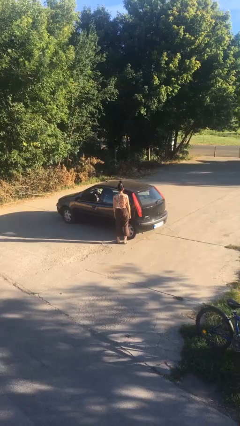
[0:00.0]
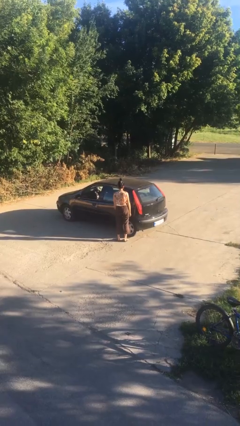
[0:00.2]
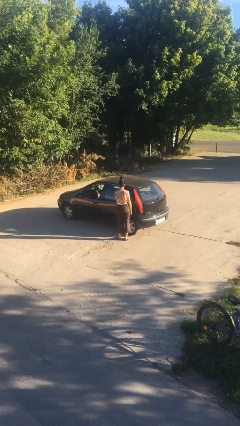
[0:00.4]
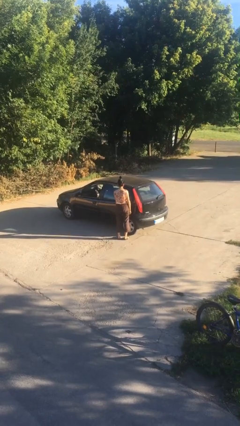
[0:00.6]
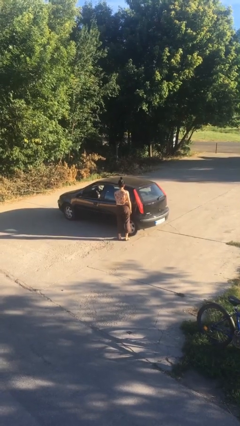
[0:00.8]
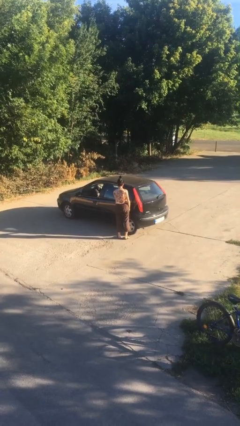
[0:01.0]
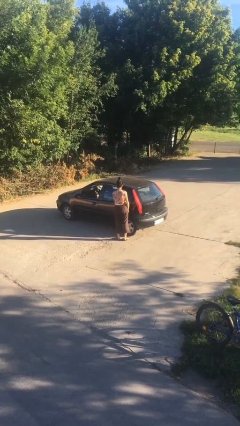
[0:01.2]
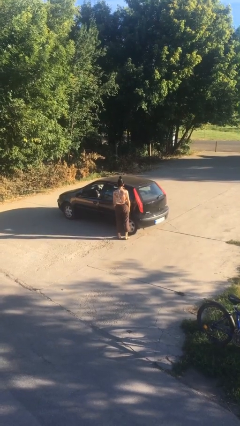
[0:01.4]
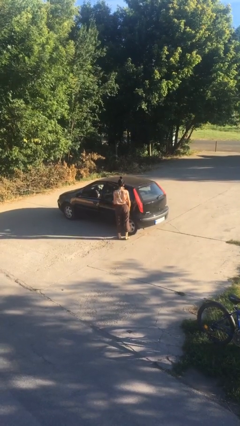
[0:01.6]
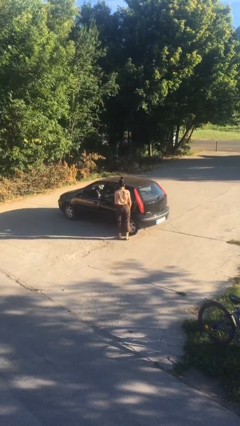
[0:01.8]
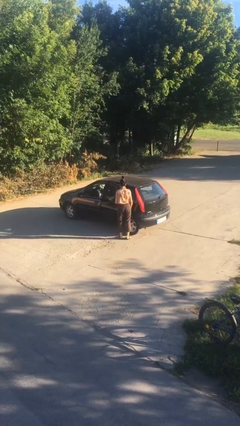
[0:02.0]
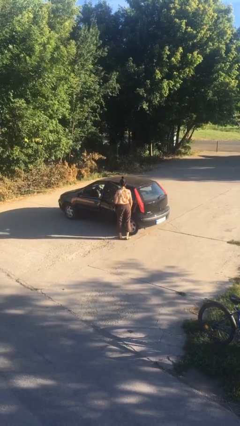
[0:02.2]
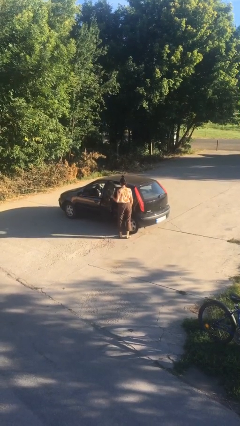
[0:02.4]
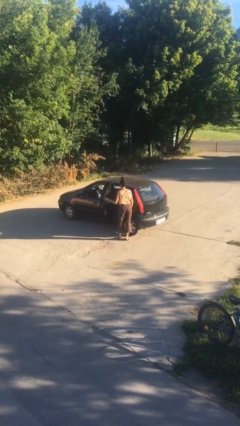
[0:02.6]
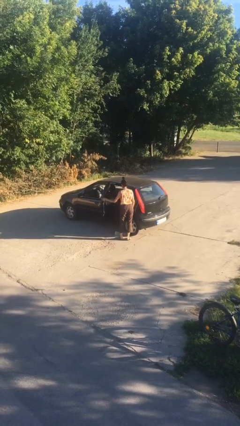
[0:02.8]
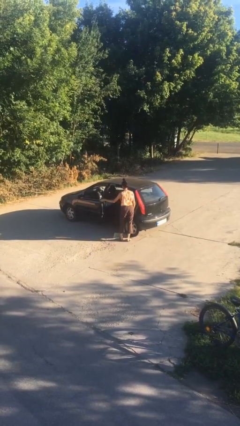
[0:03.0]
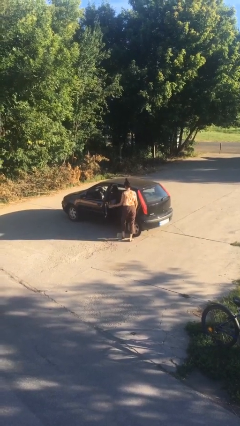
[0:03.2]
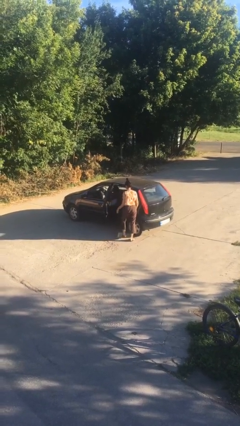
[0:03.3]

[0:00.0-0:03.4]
person opens car door

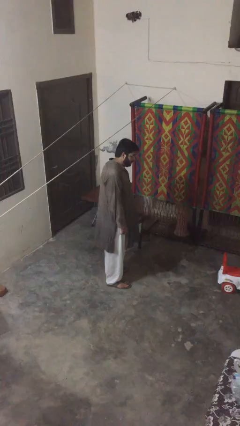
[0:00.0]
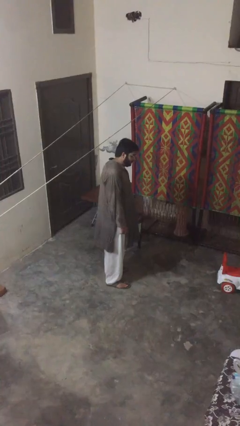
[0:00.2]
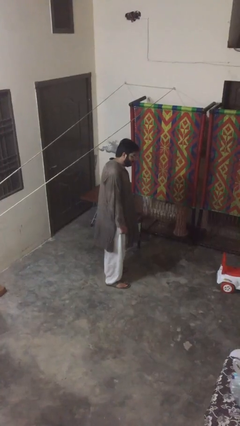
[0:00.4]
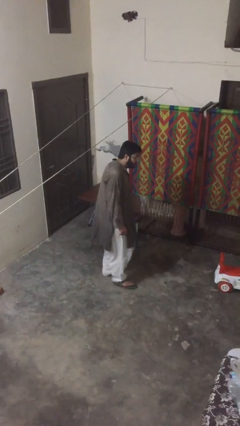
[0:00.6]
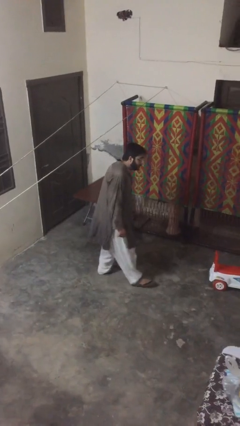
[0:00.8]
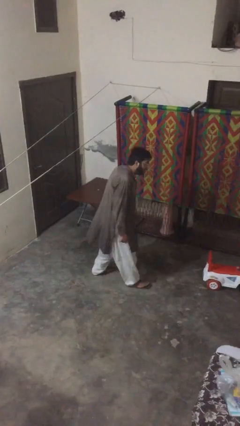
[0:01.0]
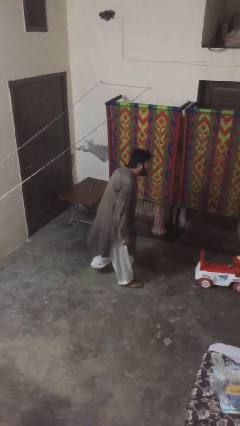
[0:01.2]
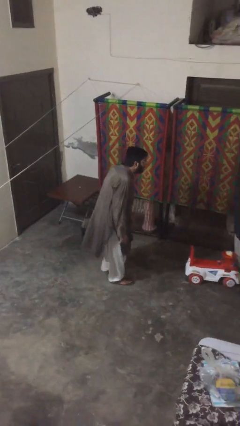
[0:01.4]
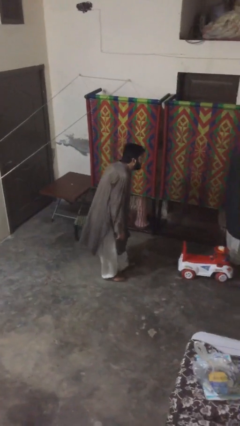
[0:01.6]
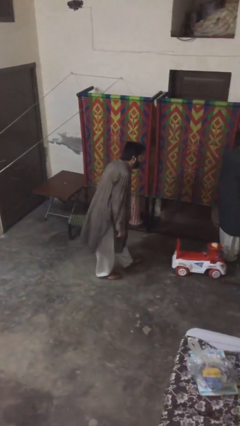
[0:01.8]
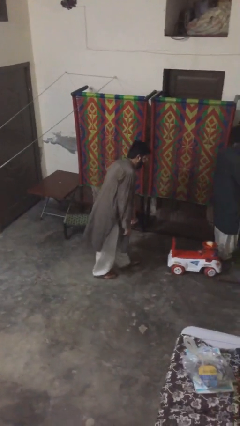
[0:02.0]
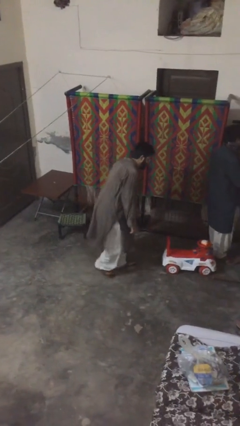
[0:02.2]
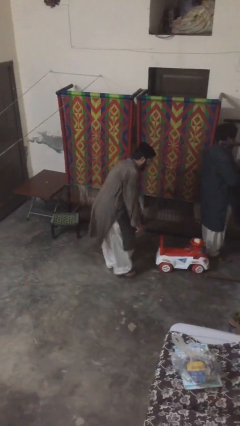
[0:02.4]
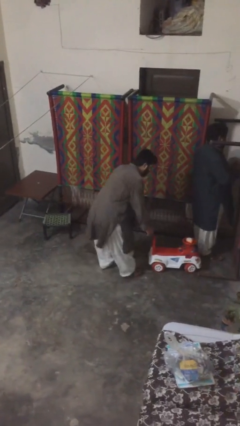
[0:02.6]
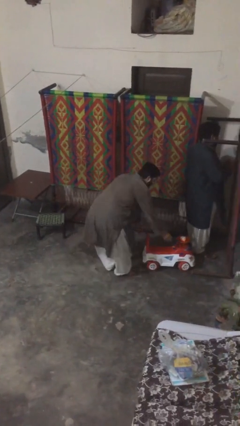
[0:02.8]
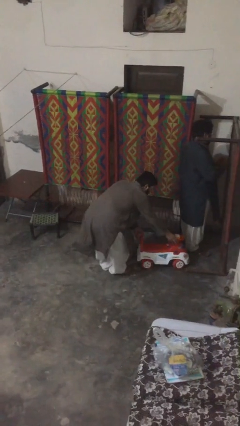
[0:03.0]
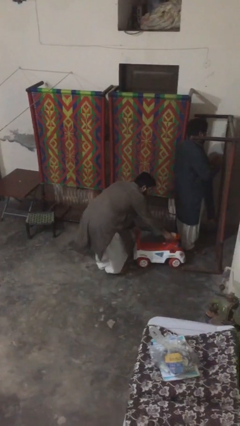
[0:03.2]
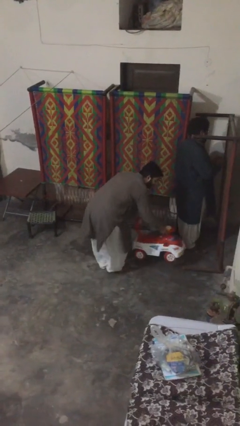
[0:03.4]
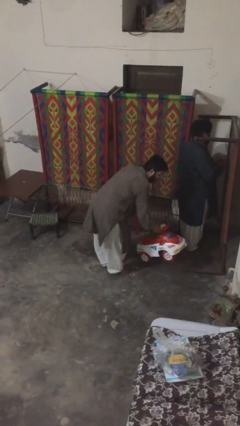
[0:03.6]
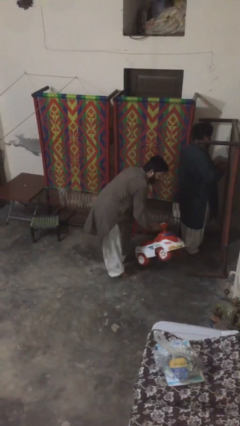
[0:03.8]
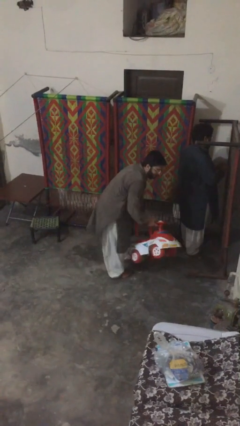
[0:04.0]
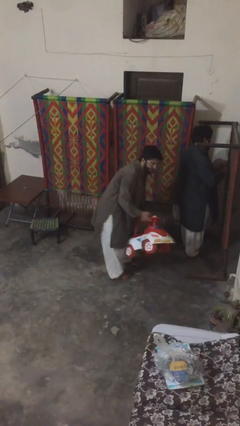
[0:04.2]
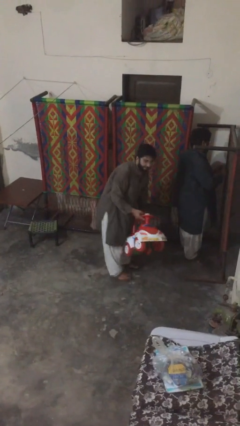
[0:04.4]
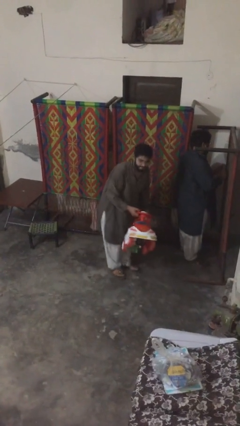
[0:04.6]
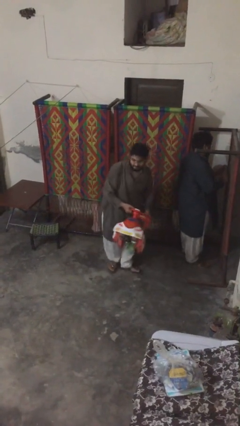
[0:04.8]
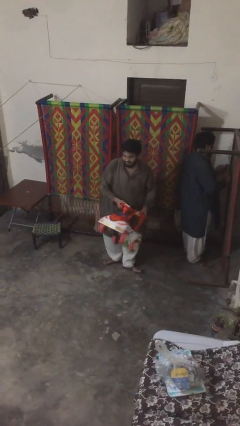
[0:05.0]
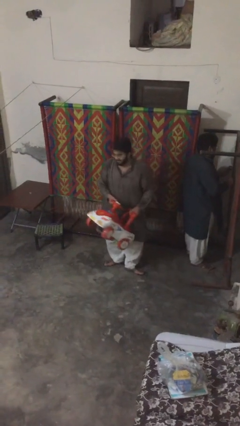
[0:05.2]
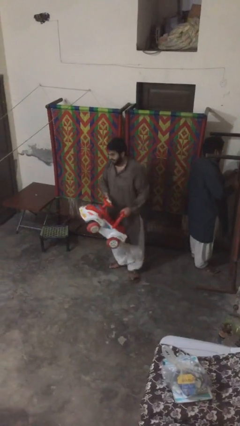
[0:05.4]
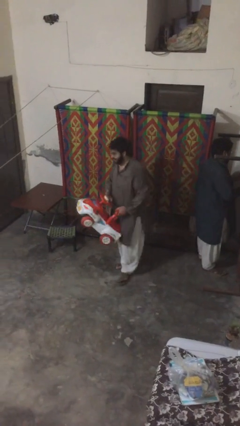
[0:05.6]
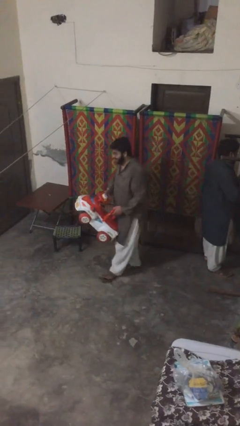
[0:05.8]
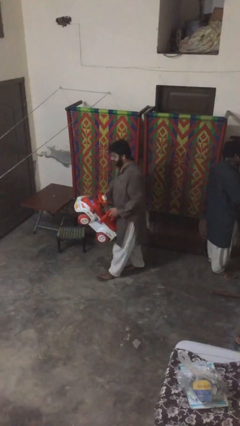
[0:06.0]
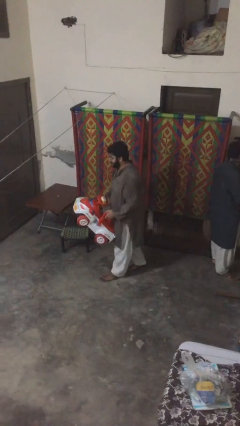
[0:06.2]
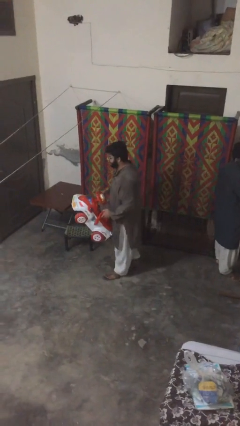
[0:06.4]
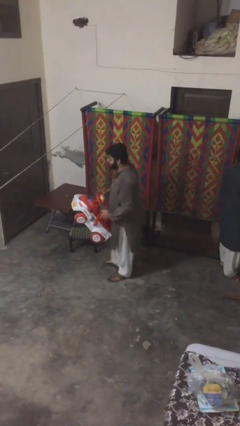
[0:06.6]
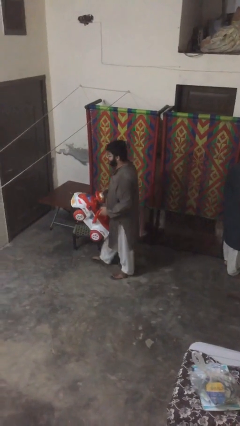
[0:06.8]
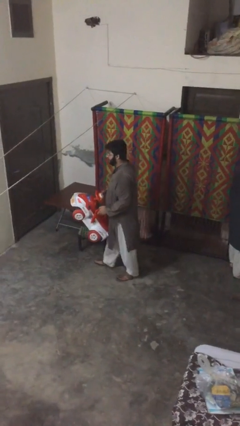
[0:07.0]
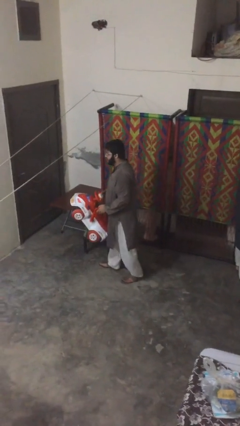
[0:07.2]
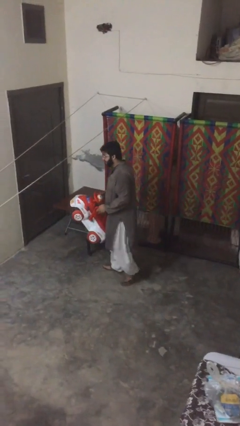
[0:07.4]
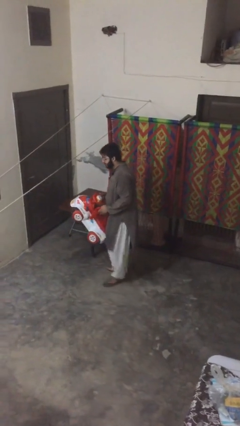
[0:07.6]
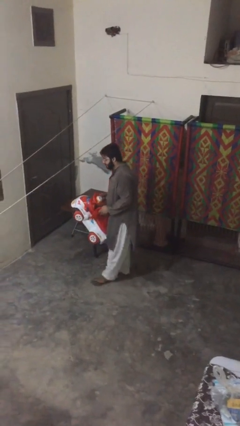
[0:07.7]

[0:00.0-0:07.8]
person steals object from person

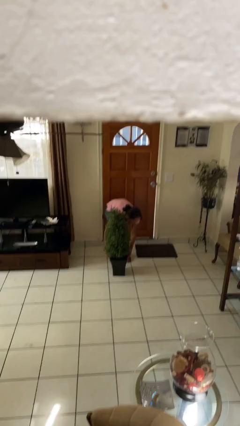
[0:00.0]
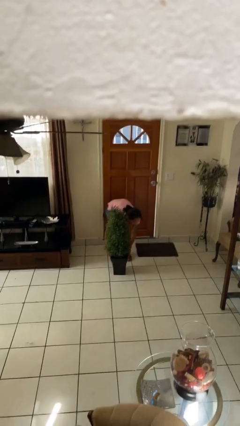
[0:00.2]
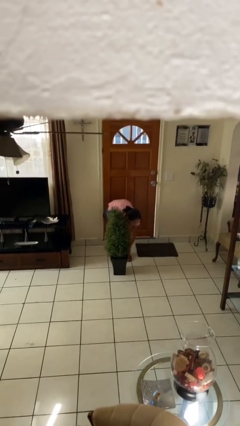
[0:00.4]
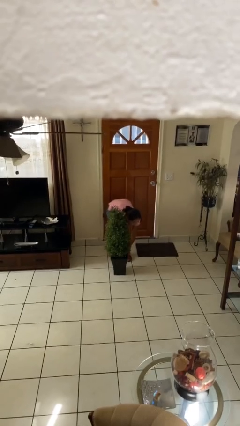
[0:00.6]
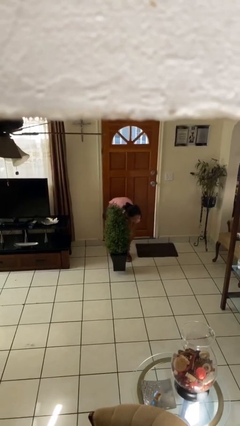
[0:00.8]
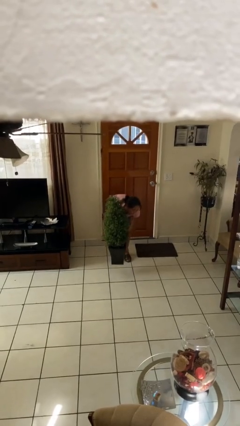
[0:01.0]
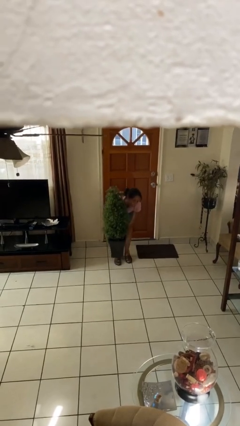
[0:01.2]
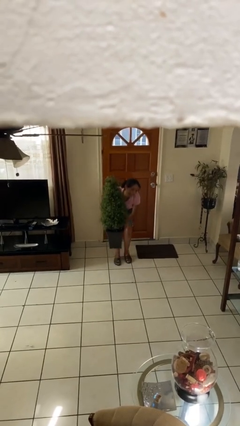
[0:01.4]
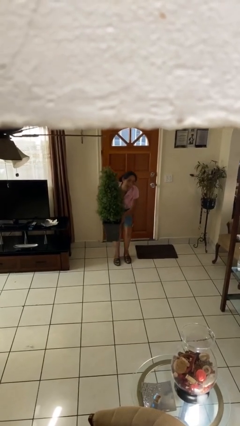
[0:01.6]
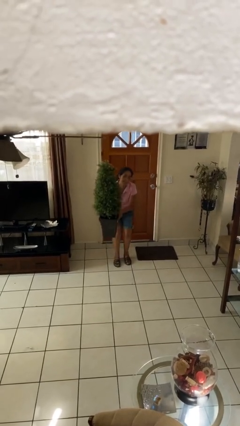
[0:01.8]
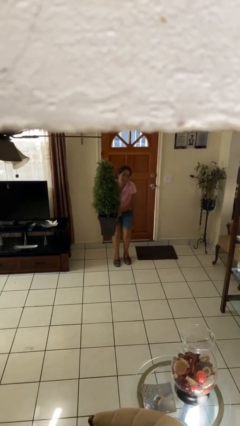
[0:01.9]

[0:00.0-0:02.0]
person picks up object from floor

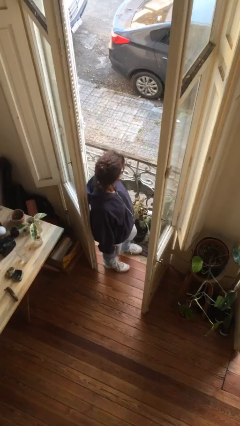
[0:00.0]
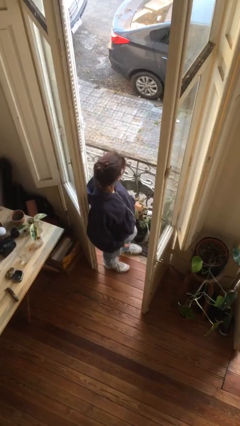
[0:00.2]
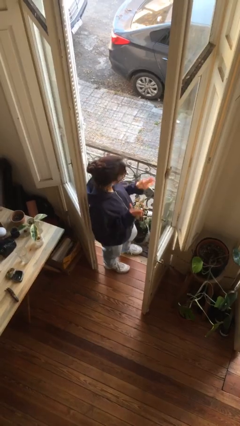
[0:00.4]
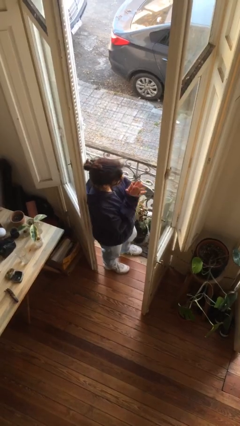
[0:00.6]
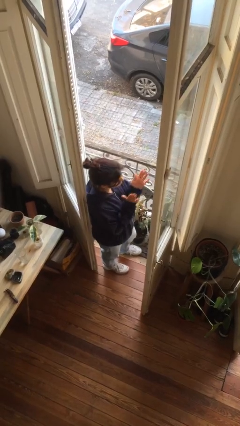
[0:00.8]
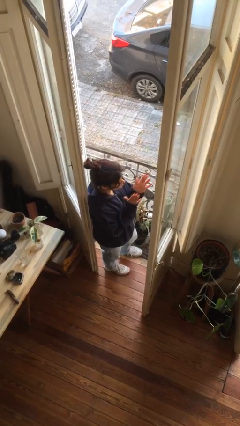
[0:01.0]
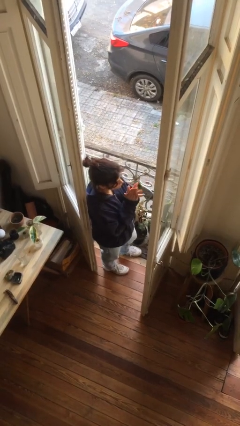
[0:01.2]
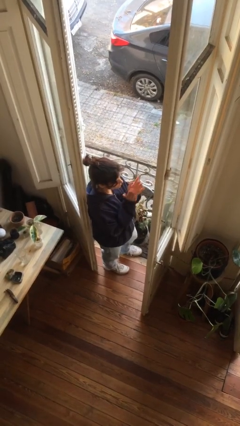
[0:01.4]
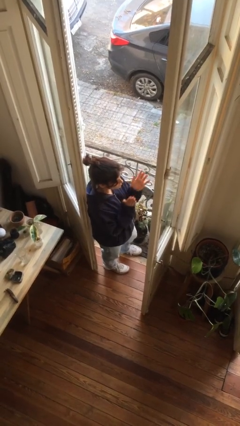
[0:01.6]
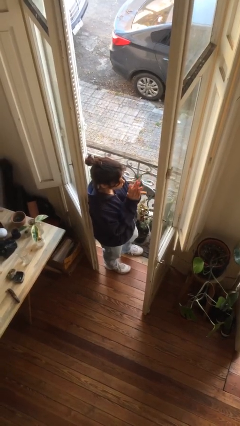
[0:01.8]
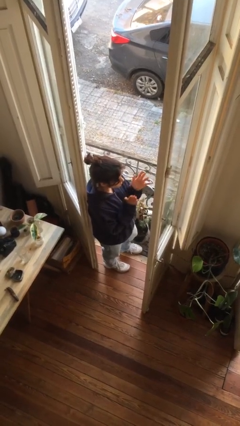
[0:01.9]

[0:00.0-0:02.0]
person claps hands

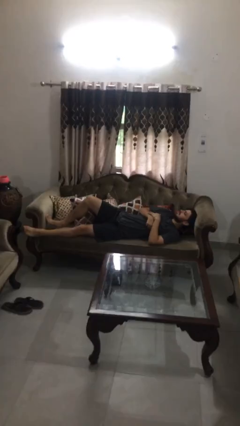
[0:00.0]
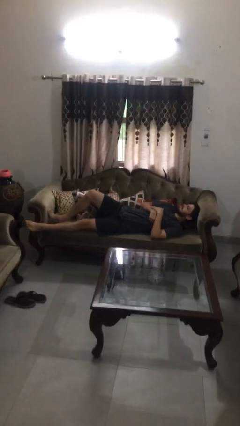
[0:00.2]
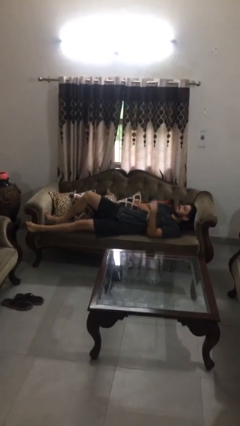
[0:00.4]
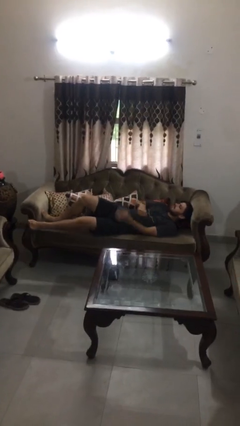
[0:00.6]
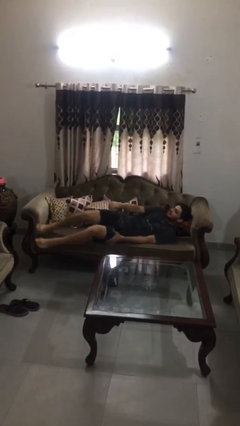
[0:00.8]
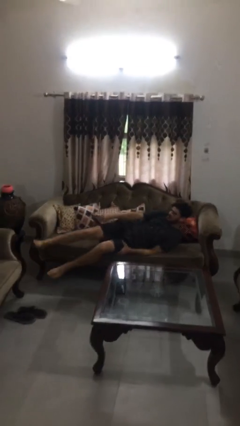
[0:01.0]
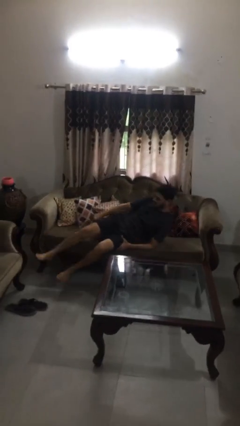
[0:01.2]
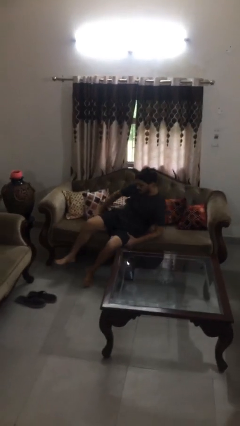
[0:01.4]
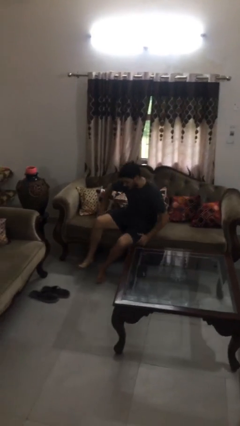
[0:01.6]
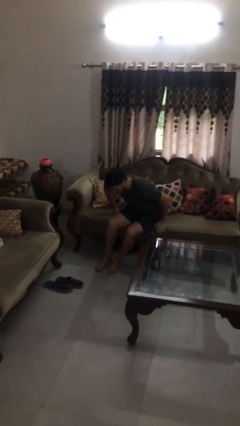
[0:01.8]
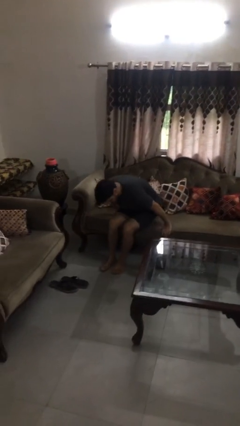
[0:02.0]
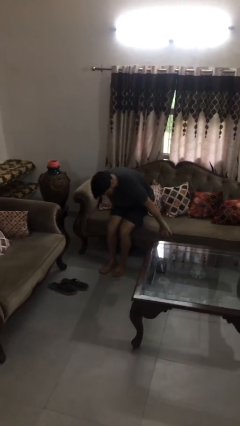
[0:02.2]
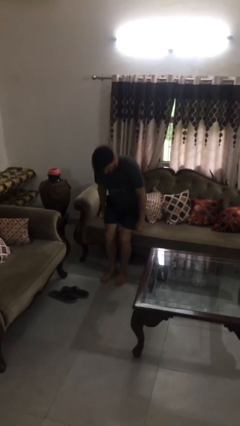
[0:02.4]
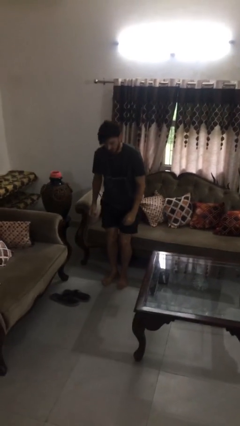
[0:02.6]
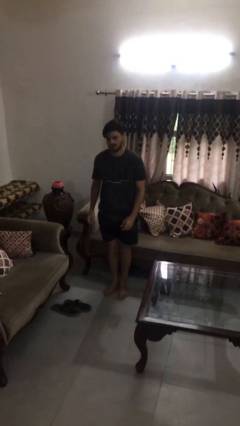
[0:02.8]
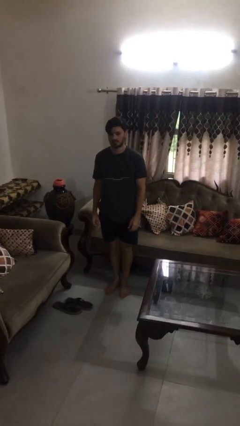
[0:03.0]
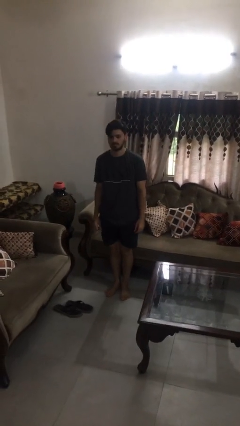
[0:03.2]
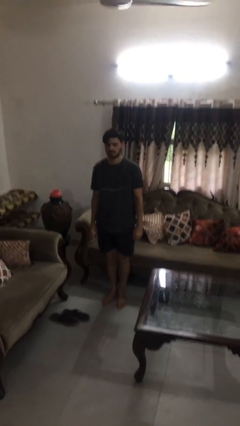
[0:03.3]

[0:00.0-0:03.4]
person stands up
